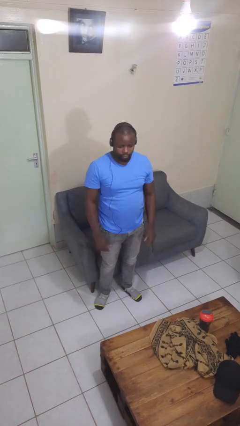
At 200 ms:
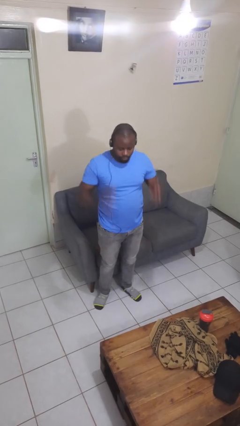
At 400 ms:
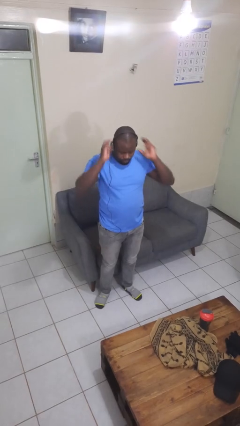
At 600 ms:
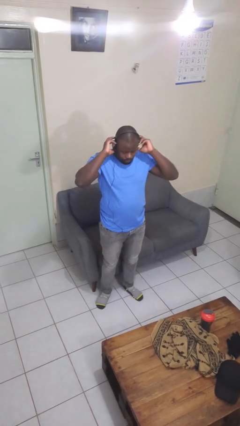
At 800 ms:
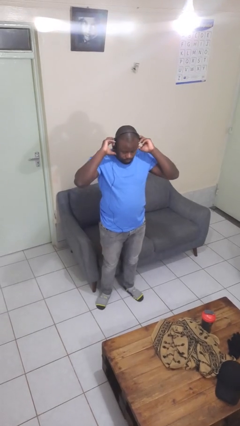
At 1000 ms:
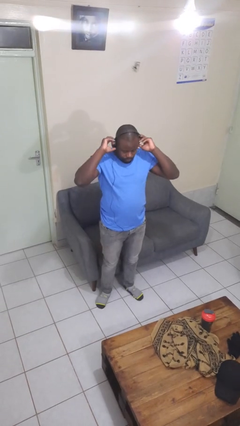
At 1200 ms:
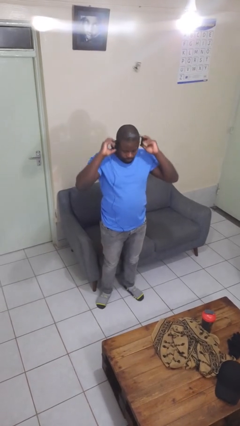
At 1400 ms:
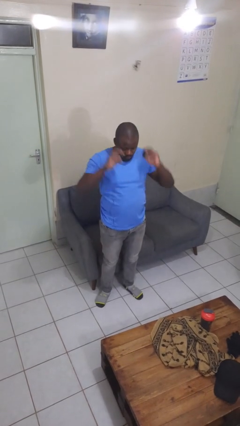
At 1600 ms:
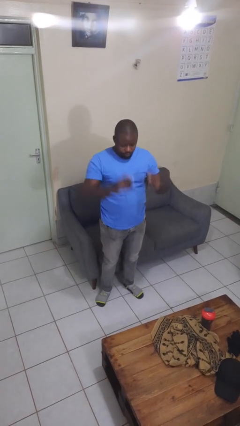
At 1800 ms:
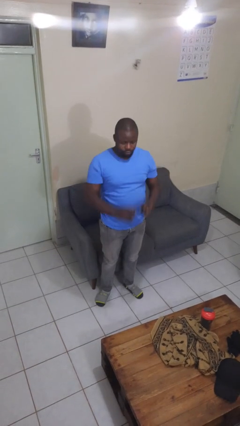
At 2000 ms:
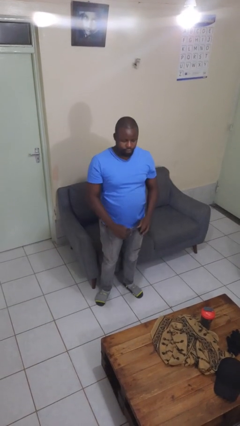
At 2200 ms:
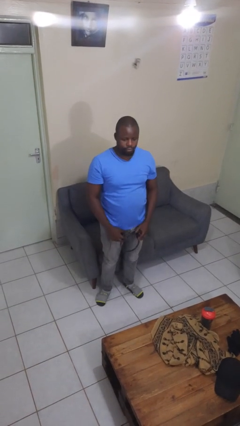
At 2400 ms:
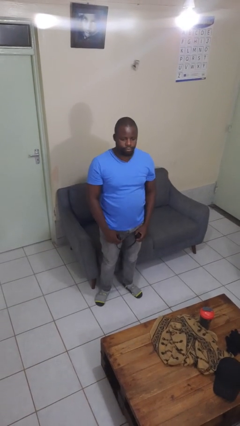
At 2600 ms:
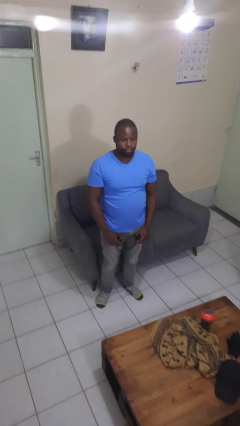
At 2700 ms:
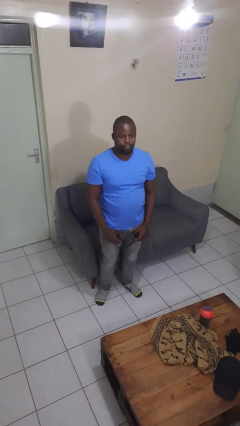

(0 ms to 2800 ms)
person takes off headphones

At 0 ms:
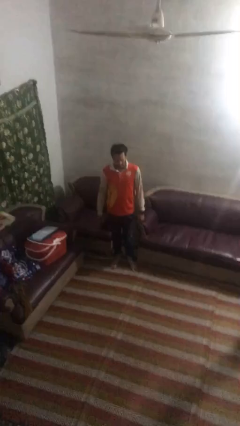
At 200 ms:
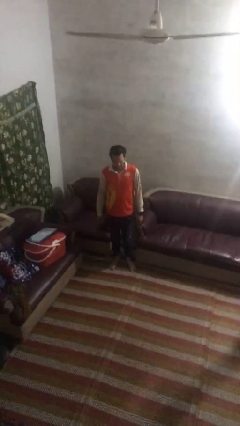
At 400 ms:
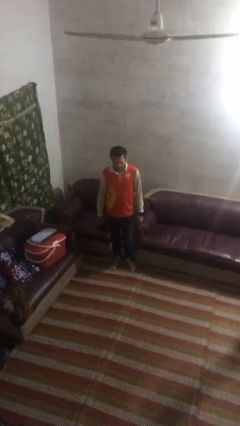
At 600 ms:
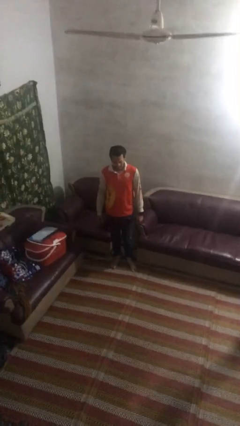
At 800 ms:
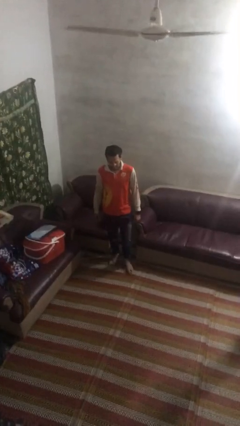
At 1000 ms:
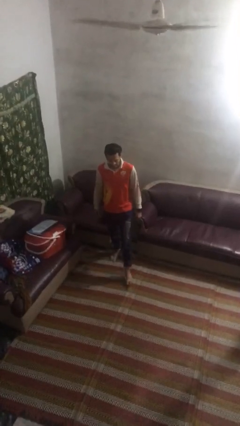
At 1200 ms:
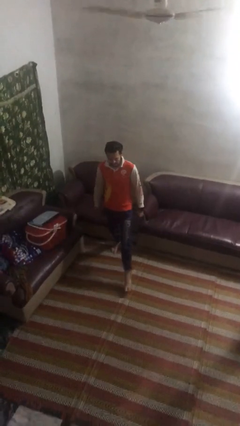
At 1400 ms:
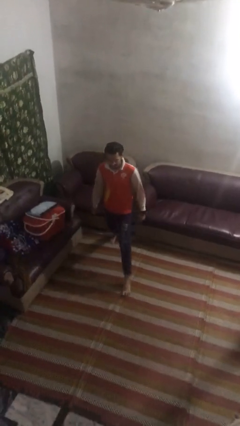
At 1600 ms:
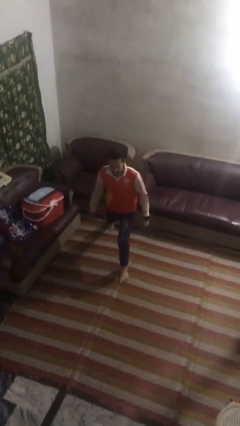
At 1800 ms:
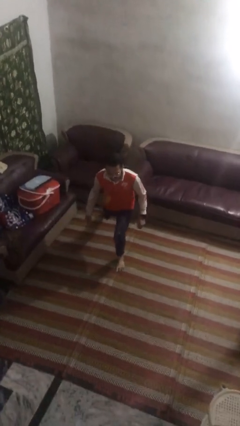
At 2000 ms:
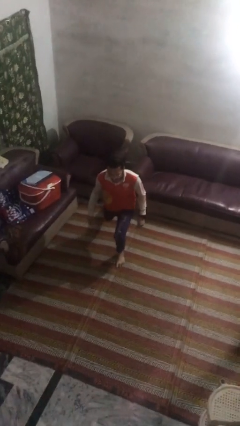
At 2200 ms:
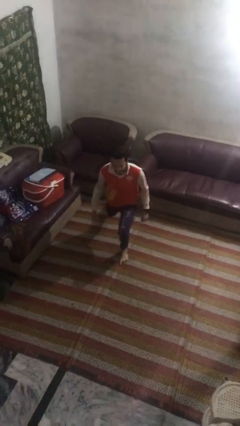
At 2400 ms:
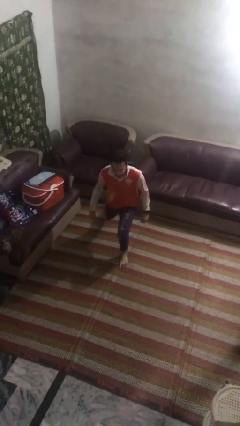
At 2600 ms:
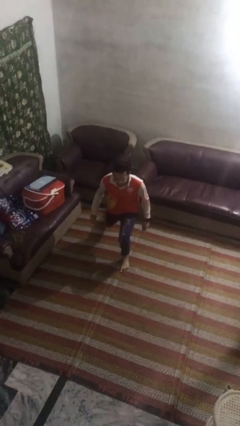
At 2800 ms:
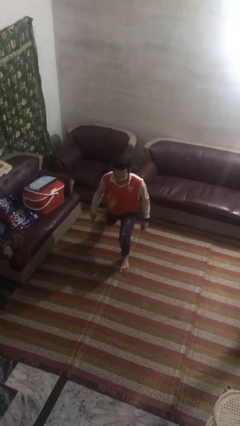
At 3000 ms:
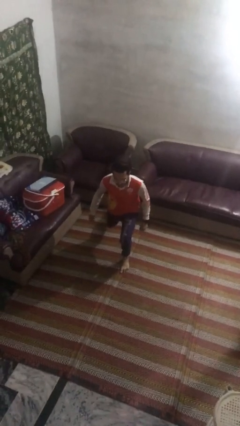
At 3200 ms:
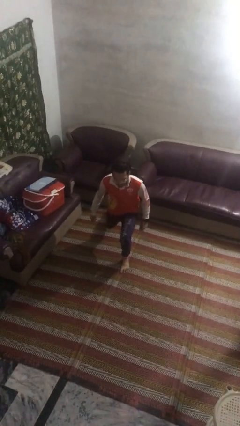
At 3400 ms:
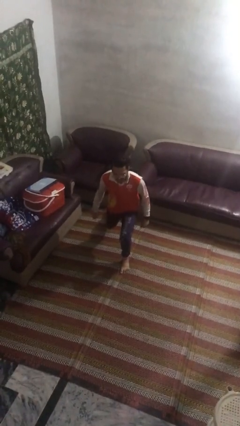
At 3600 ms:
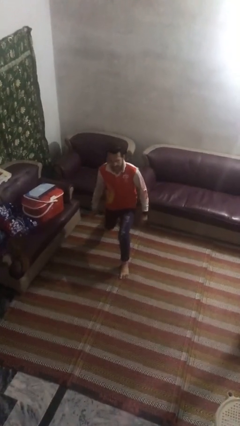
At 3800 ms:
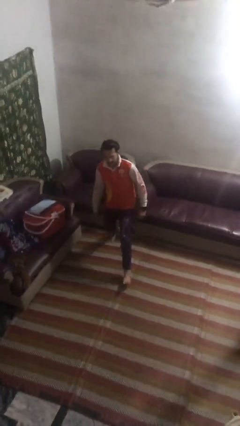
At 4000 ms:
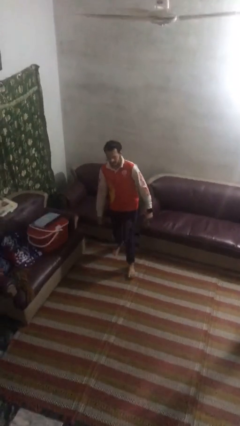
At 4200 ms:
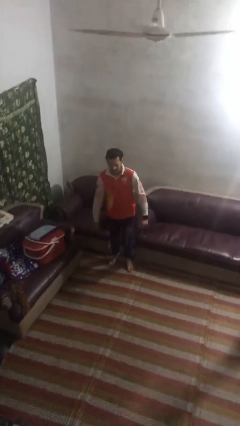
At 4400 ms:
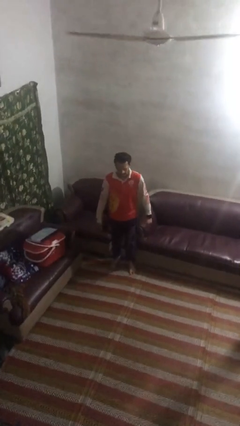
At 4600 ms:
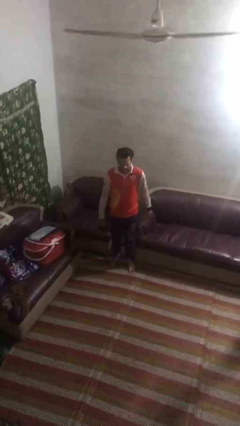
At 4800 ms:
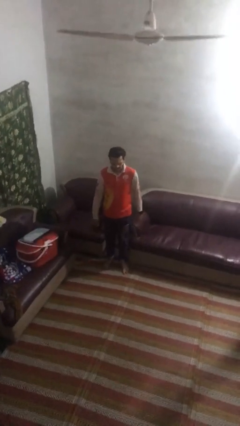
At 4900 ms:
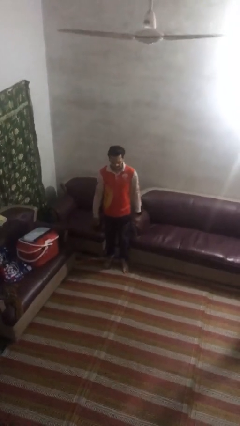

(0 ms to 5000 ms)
person exercises with lunges

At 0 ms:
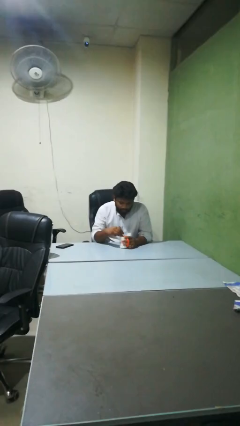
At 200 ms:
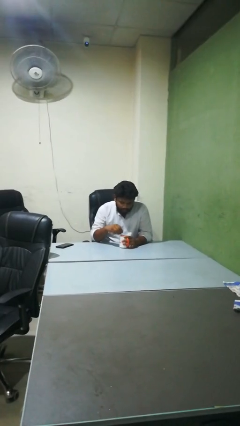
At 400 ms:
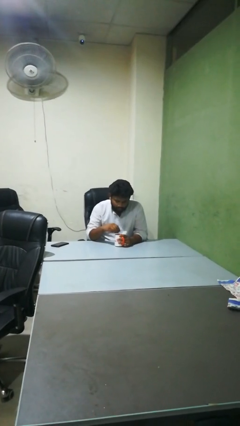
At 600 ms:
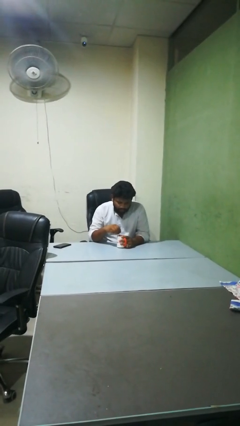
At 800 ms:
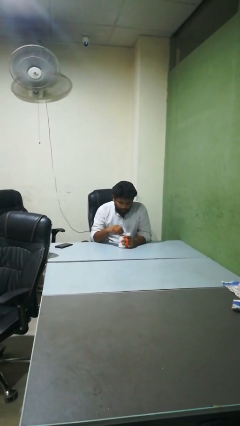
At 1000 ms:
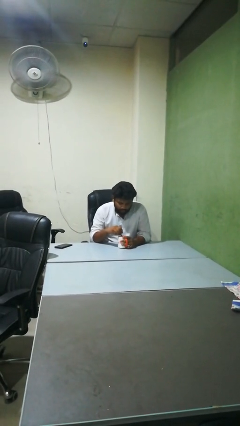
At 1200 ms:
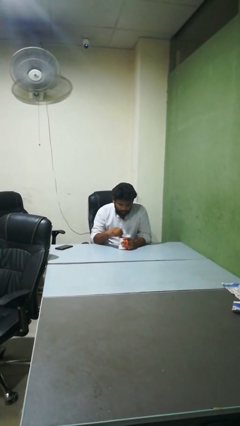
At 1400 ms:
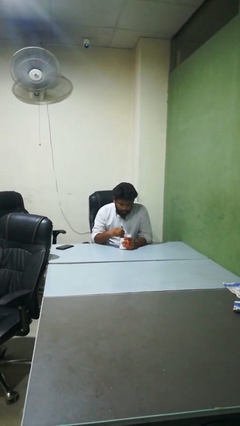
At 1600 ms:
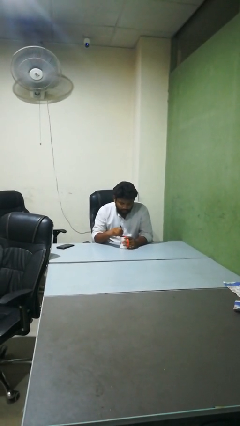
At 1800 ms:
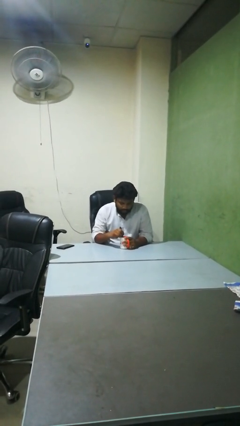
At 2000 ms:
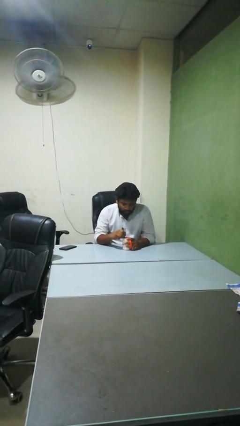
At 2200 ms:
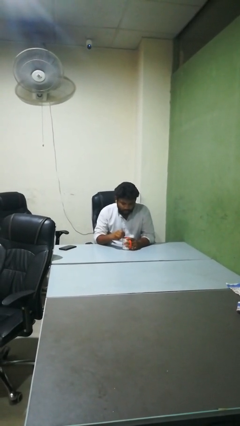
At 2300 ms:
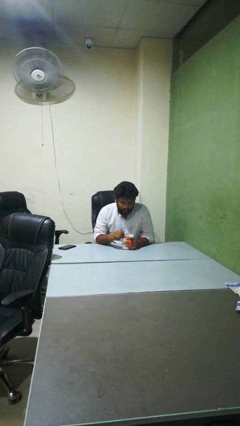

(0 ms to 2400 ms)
person stirs mug

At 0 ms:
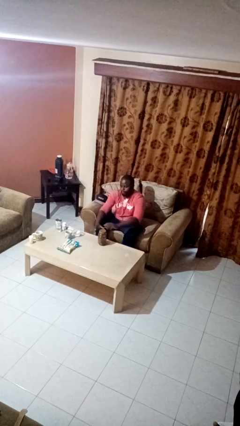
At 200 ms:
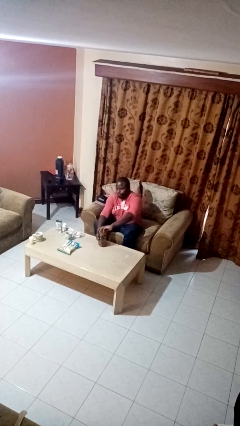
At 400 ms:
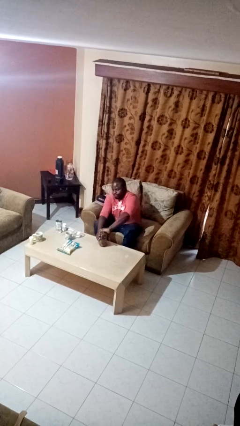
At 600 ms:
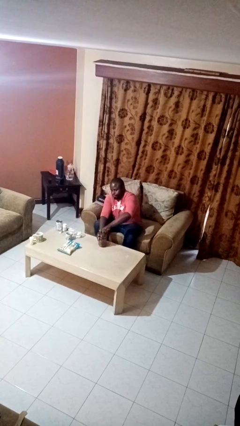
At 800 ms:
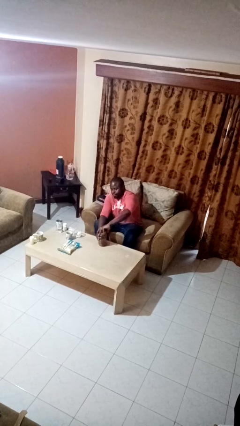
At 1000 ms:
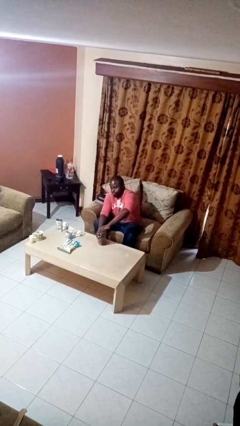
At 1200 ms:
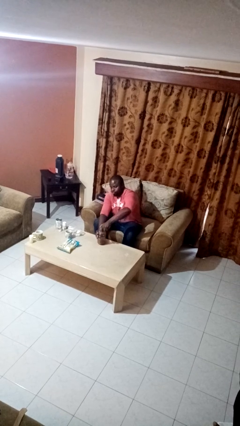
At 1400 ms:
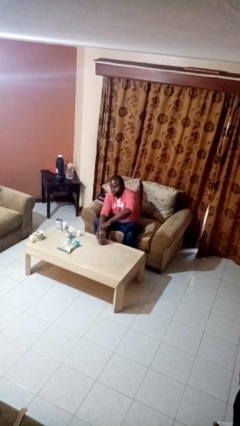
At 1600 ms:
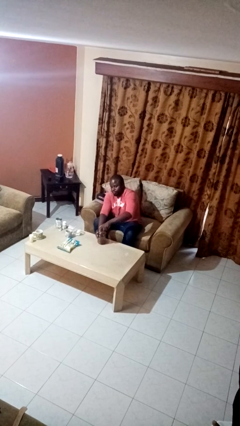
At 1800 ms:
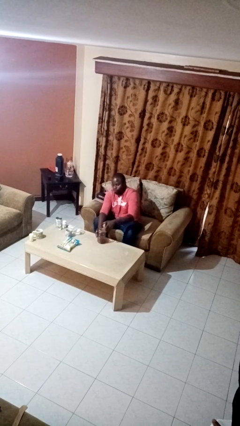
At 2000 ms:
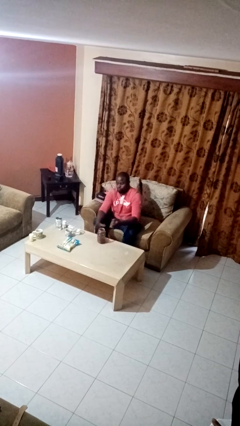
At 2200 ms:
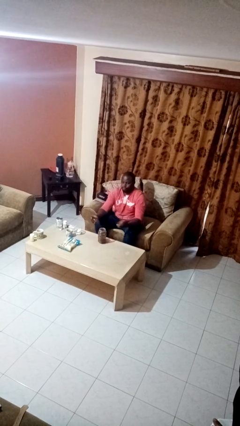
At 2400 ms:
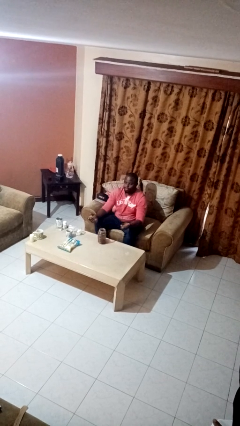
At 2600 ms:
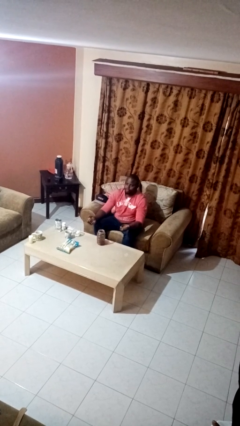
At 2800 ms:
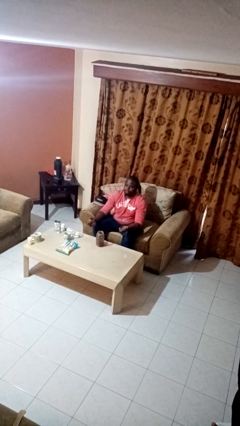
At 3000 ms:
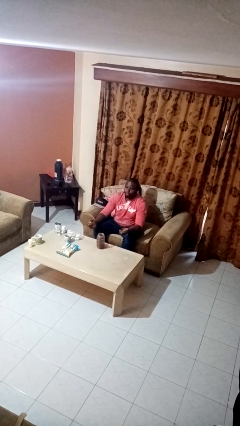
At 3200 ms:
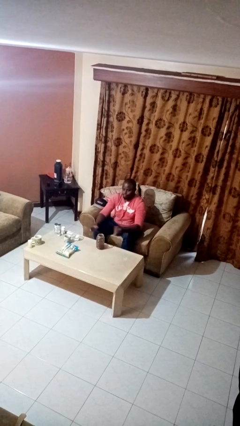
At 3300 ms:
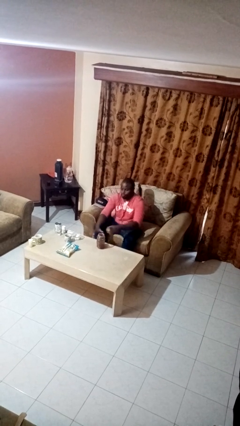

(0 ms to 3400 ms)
person opens jar

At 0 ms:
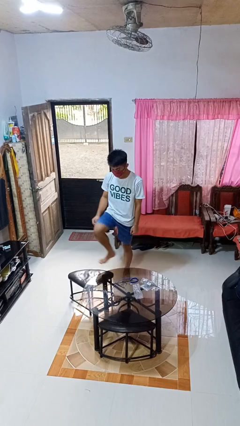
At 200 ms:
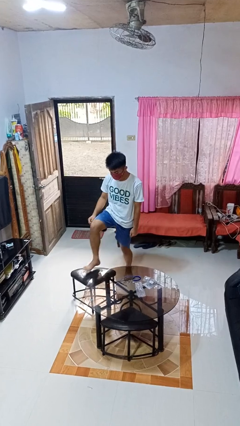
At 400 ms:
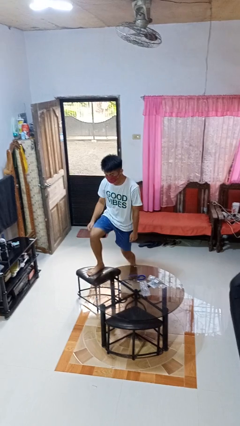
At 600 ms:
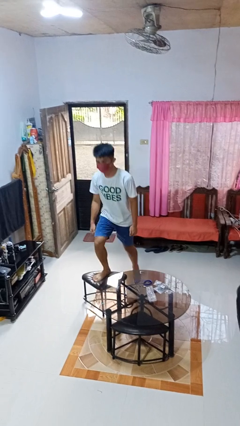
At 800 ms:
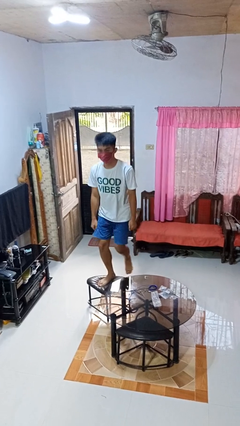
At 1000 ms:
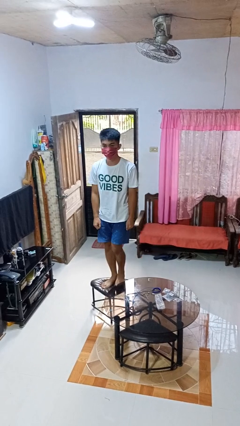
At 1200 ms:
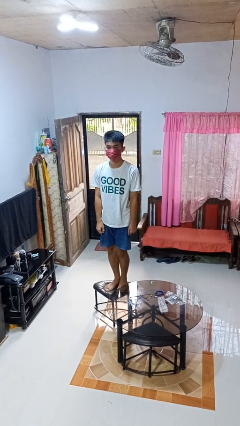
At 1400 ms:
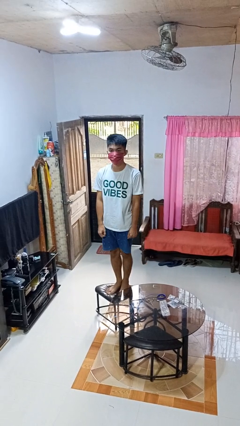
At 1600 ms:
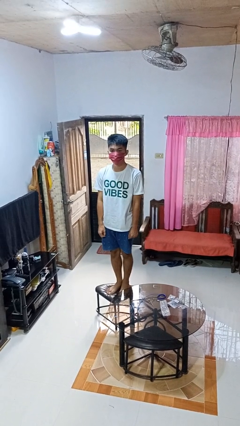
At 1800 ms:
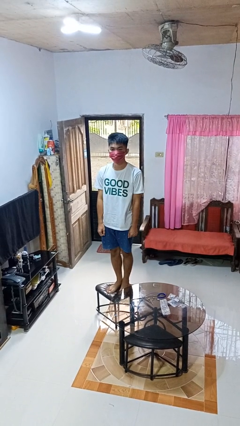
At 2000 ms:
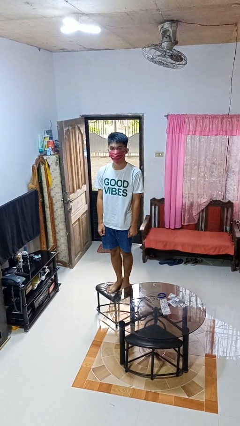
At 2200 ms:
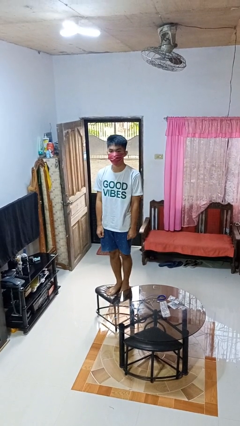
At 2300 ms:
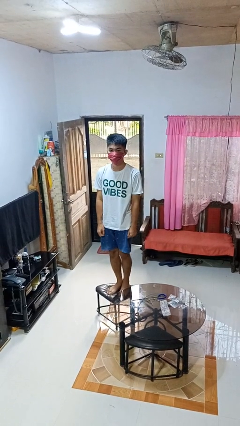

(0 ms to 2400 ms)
person climbs on chair

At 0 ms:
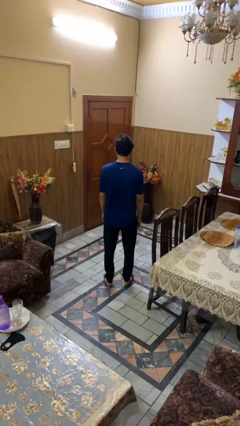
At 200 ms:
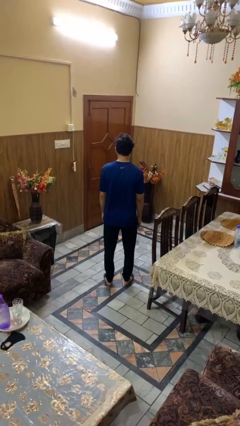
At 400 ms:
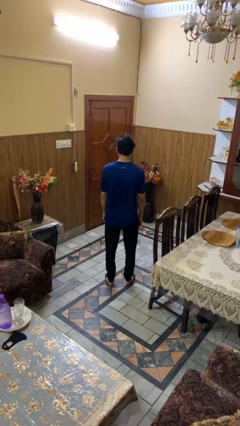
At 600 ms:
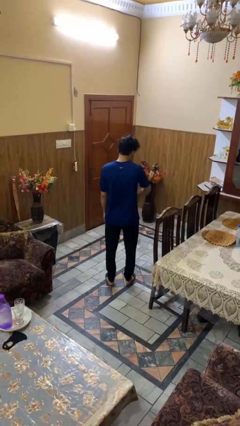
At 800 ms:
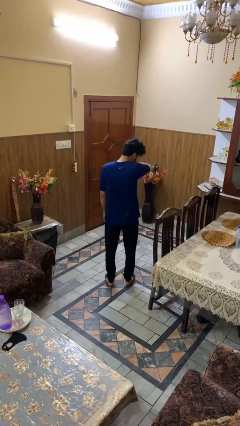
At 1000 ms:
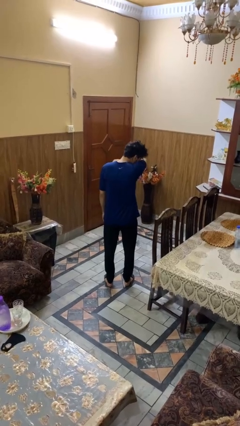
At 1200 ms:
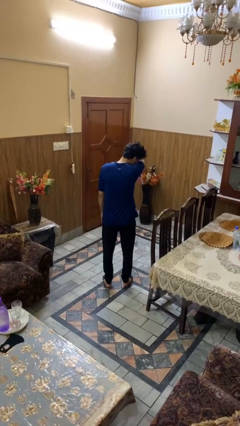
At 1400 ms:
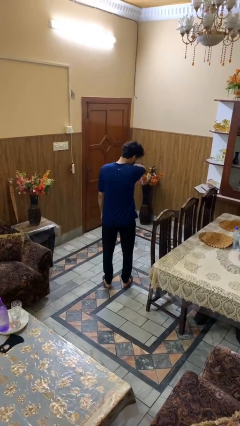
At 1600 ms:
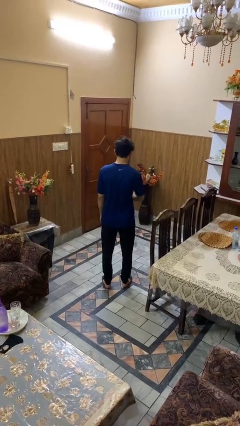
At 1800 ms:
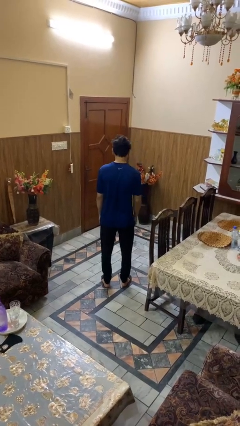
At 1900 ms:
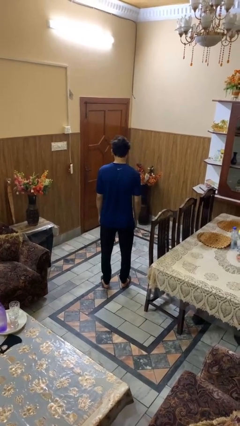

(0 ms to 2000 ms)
person sneezes into arm
